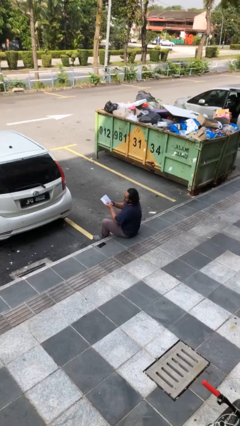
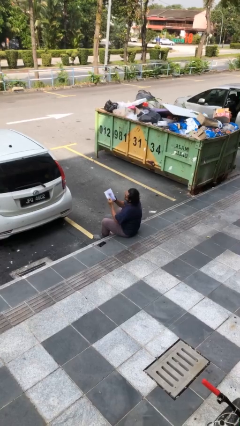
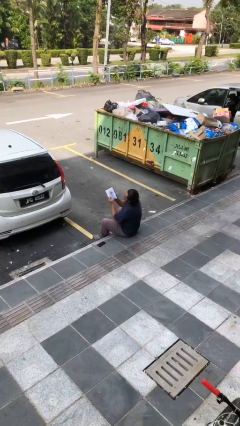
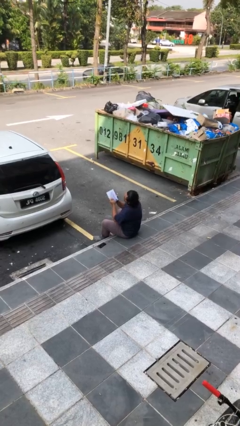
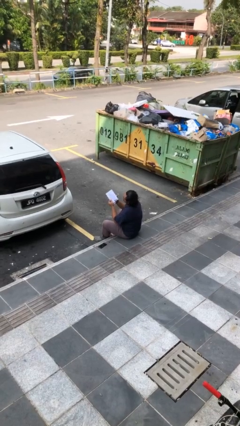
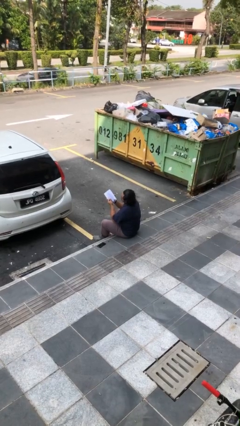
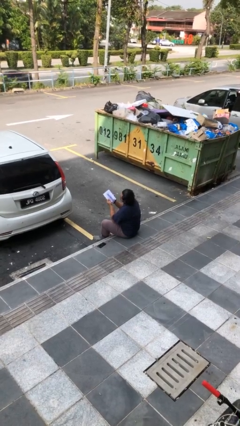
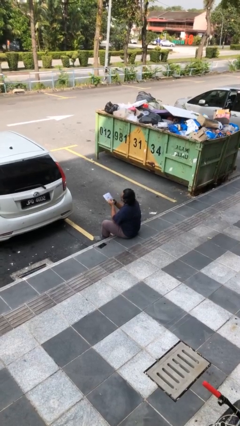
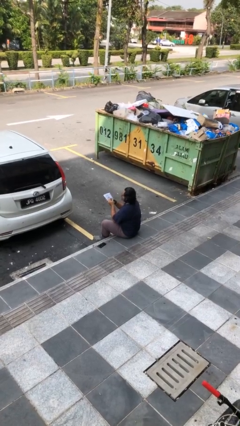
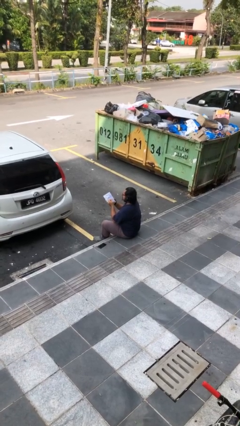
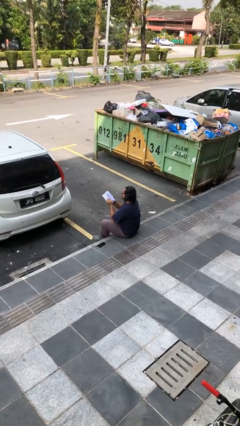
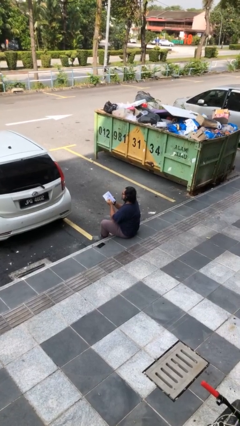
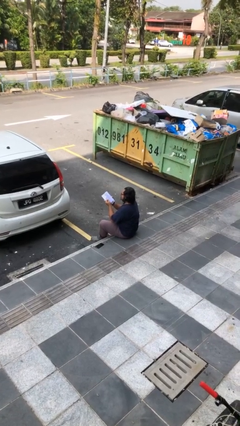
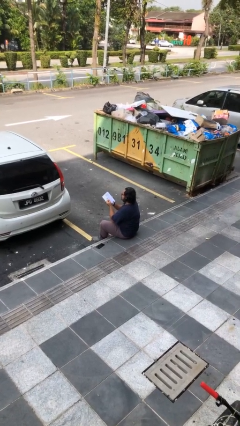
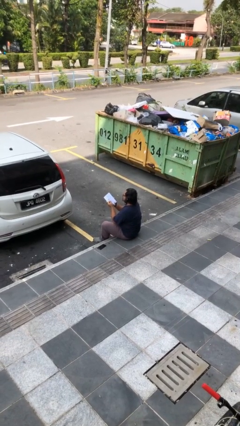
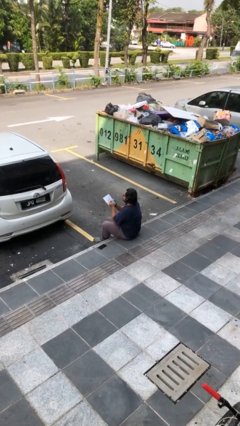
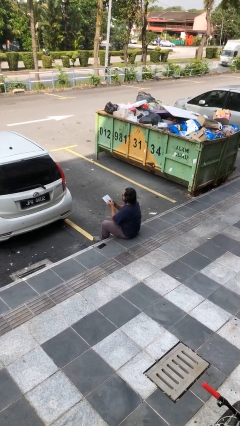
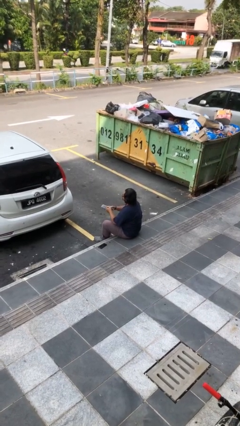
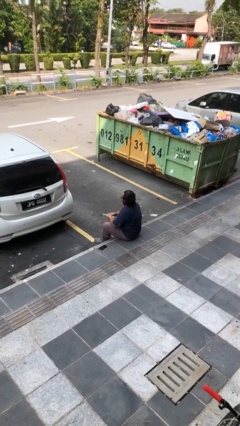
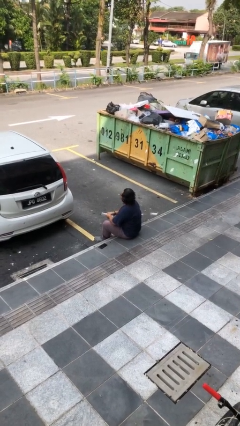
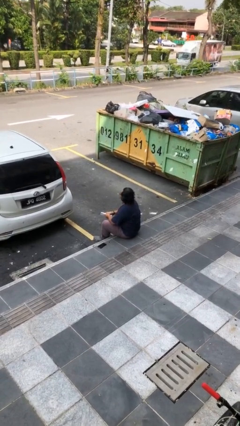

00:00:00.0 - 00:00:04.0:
person reads document

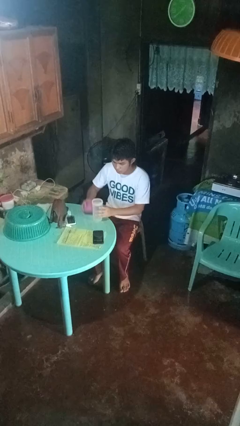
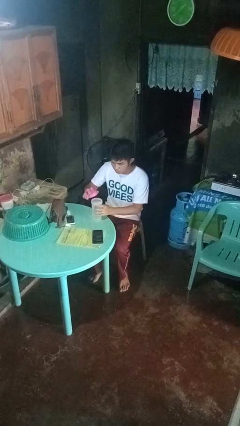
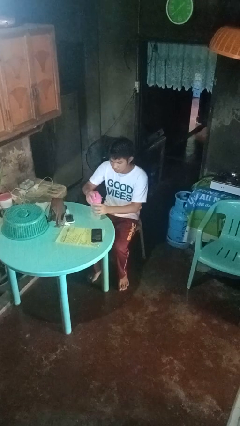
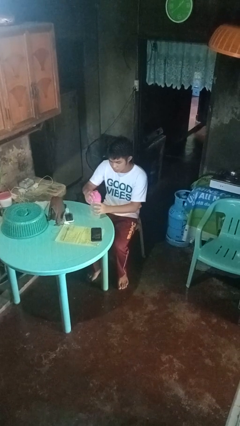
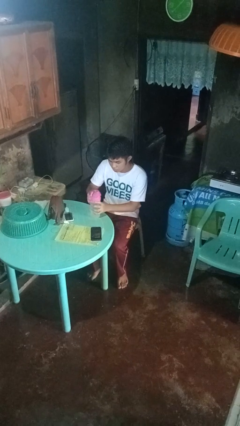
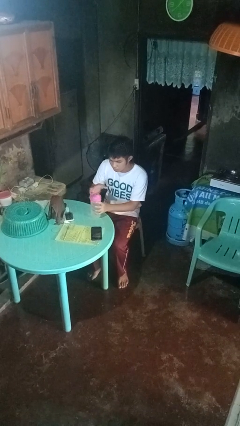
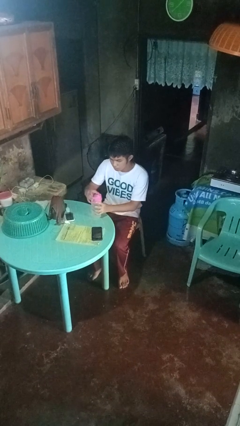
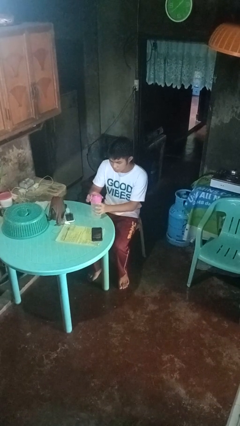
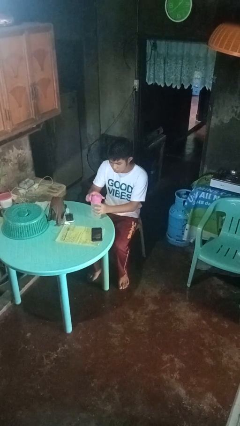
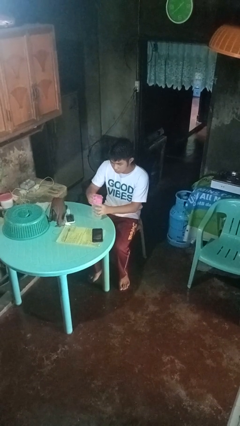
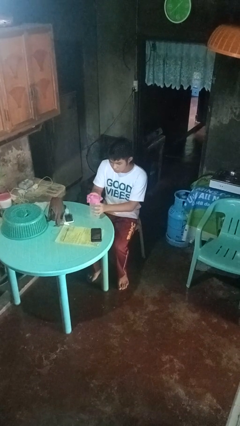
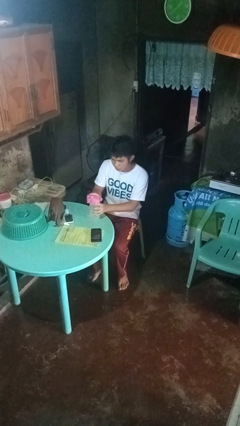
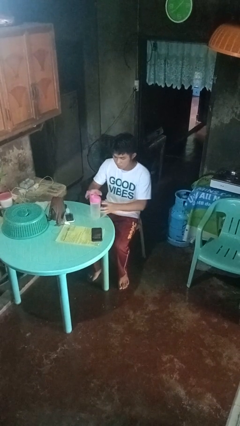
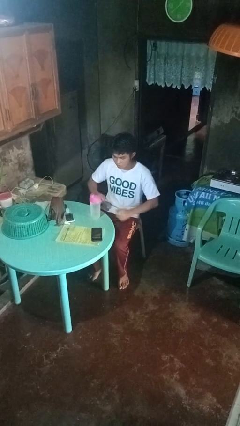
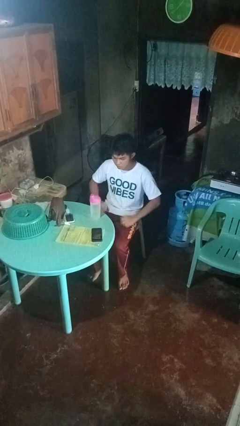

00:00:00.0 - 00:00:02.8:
person screws lid to bottle

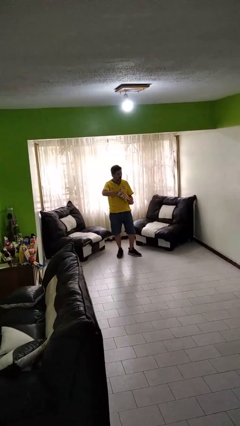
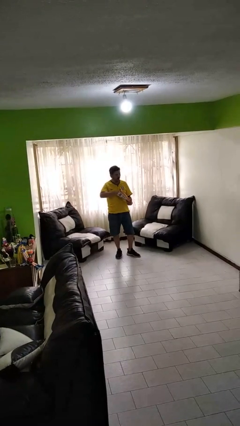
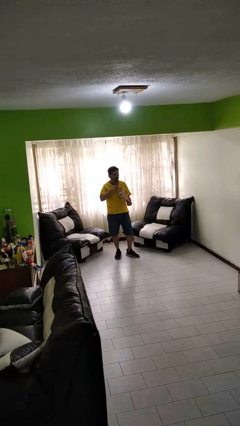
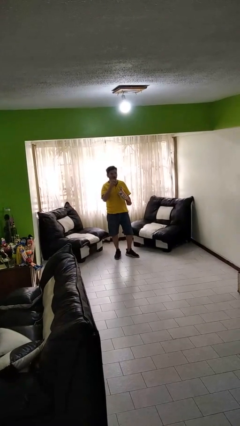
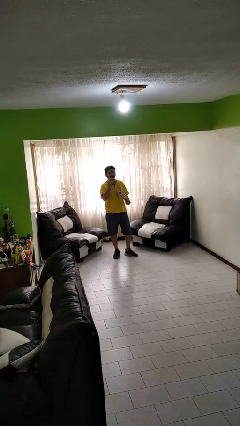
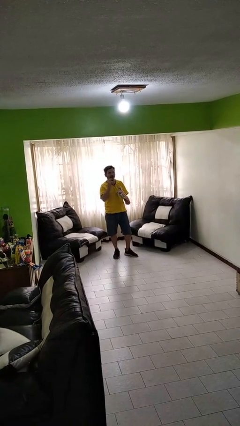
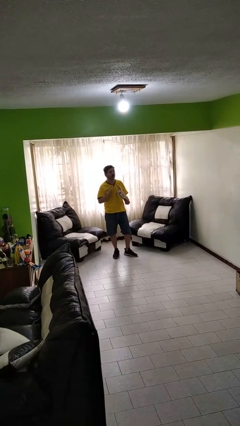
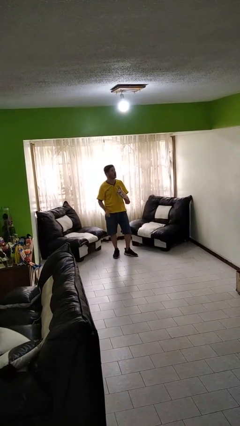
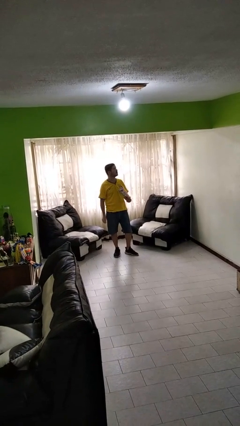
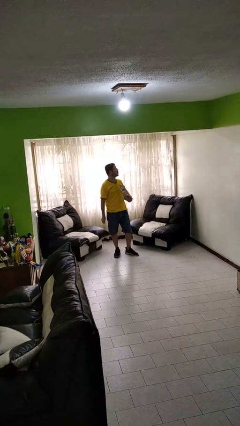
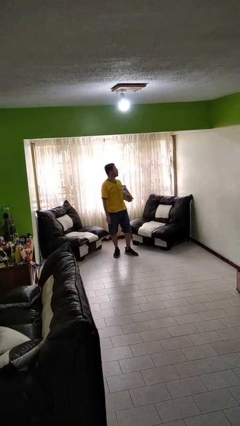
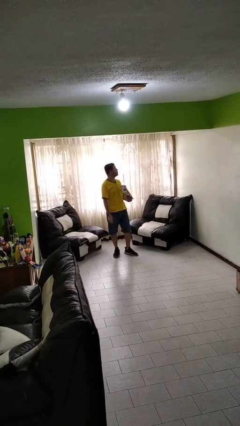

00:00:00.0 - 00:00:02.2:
person eats snack from bag

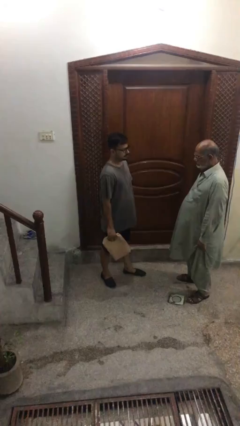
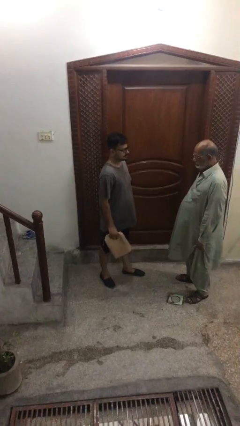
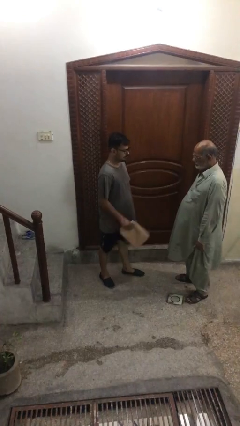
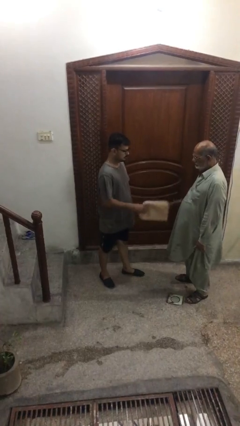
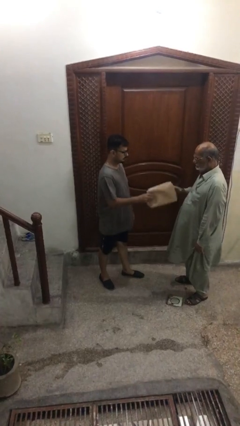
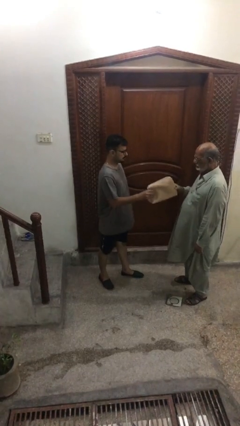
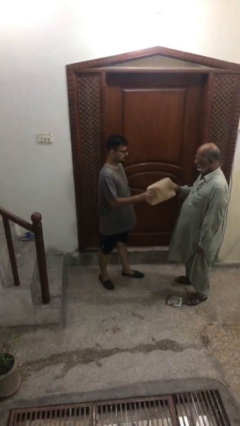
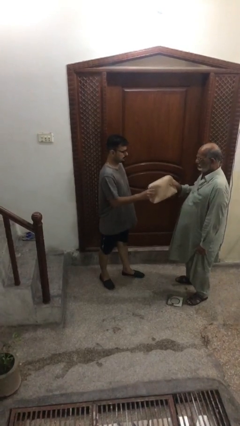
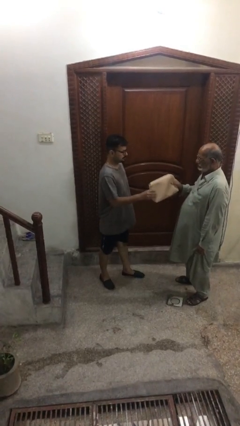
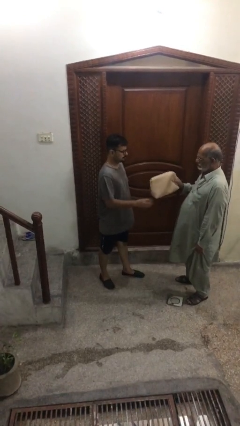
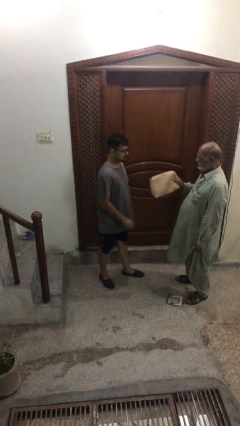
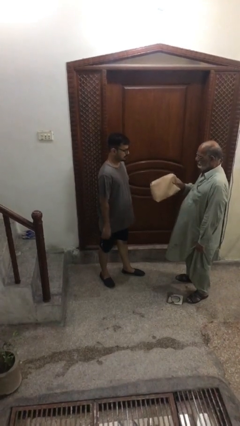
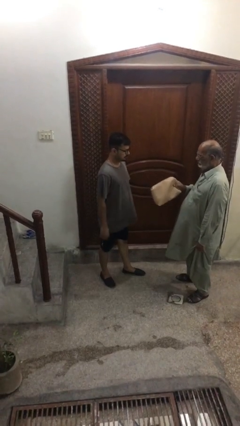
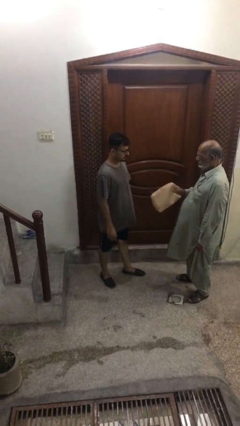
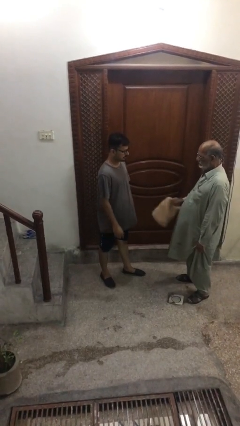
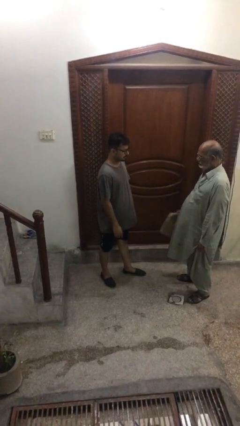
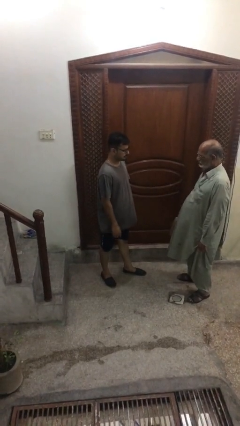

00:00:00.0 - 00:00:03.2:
person transfers object to person

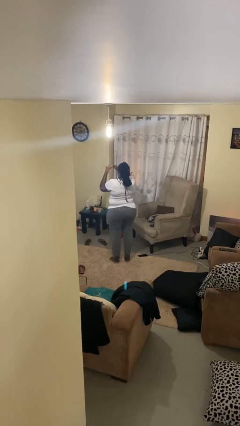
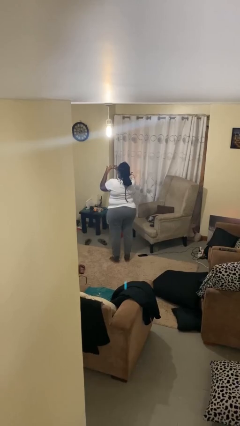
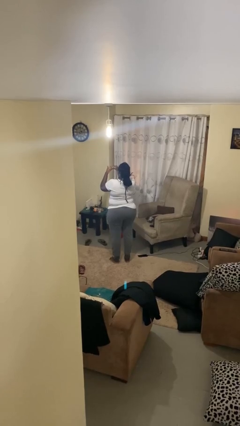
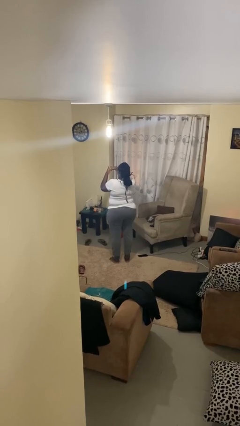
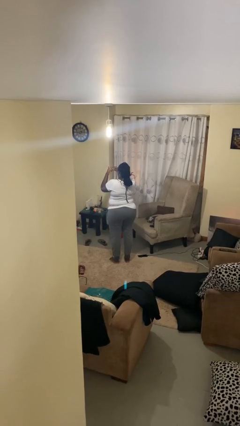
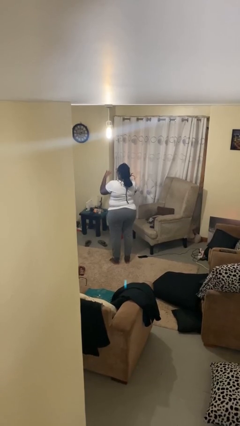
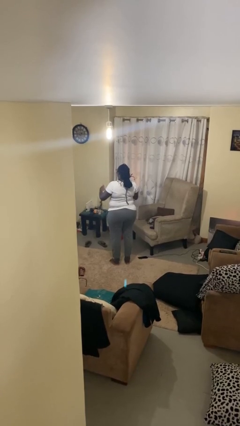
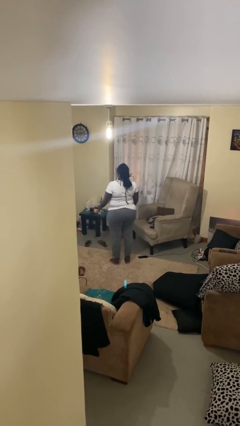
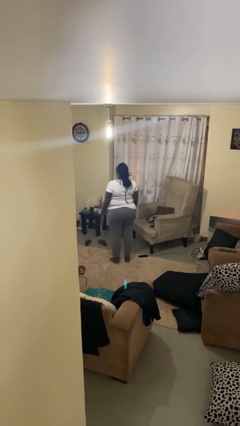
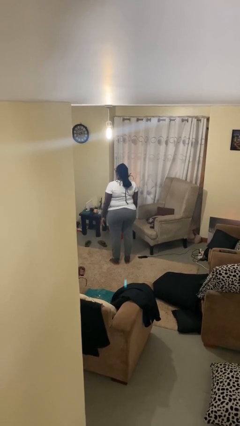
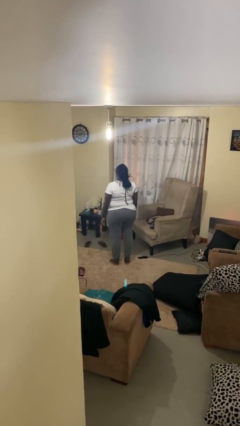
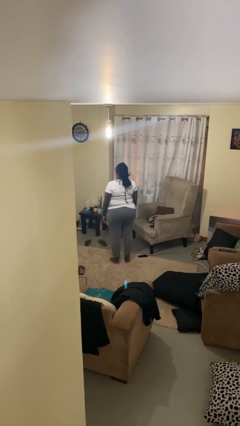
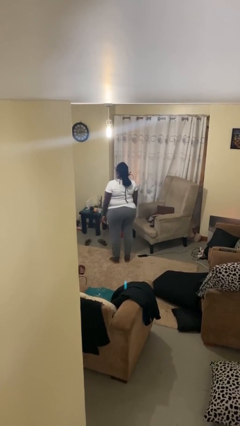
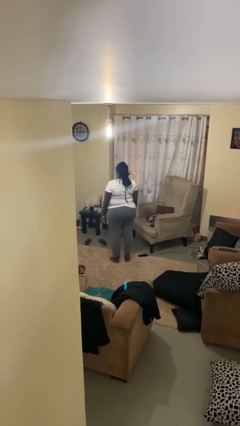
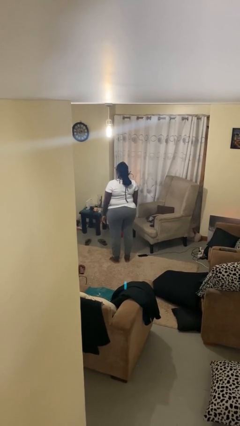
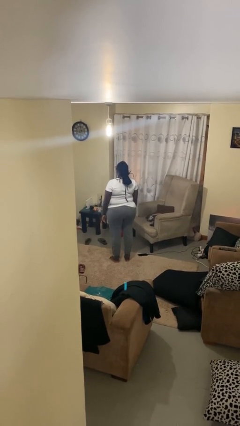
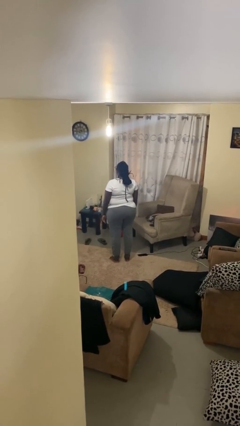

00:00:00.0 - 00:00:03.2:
person puts on ring

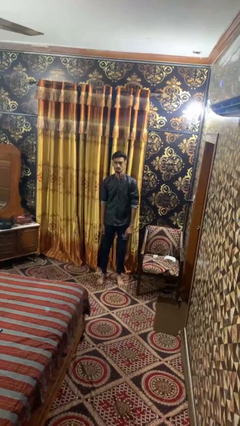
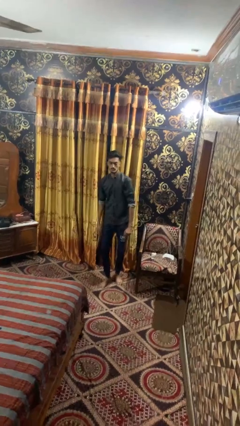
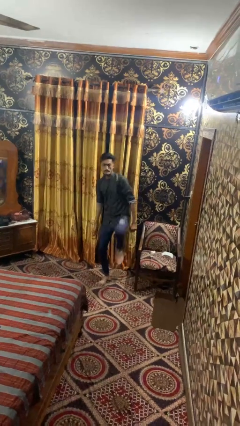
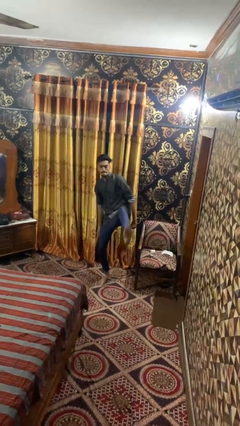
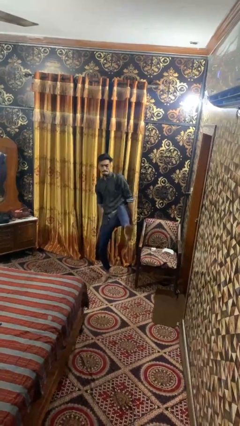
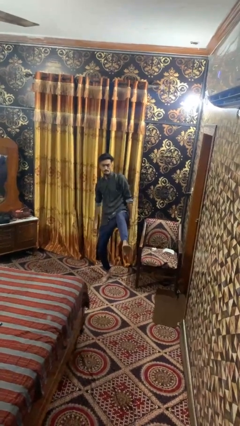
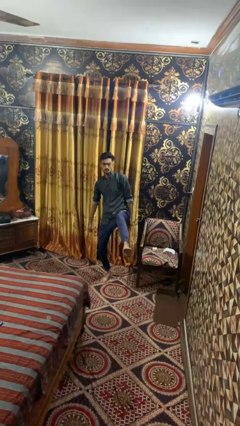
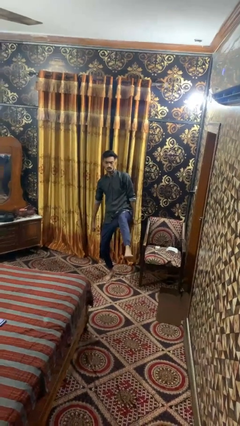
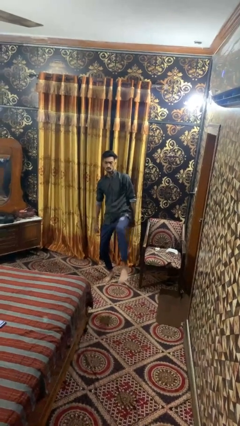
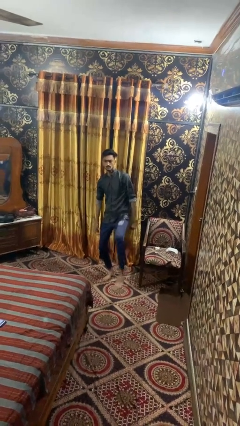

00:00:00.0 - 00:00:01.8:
person karate kicks
